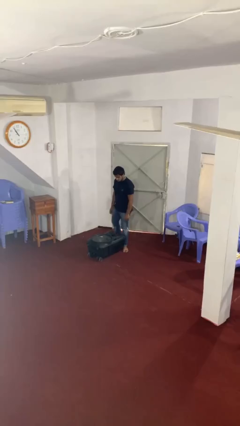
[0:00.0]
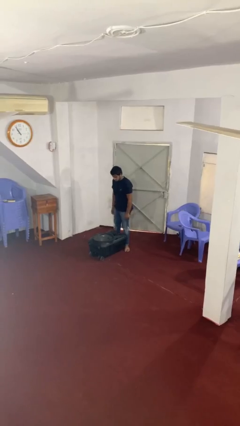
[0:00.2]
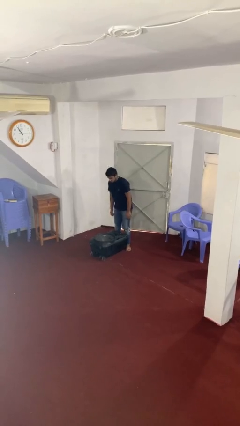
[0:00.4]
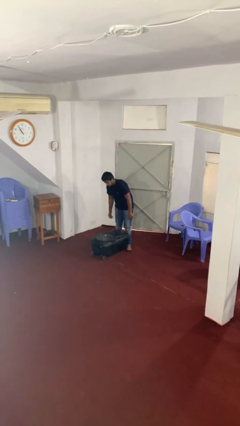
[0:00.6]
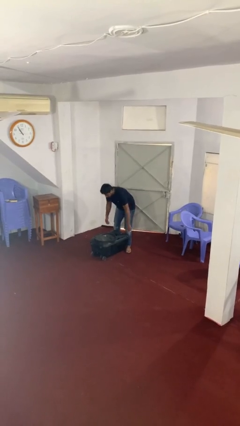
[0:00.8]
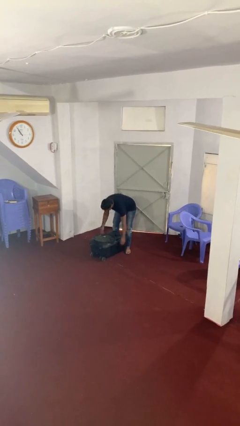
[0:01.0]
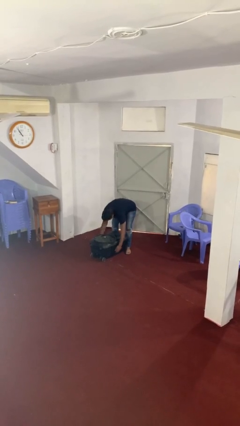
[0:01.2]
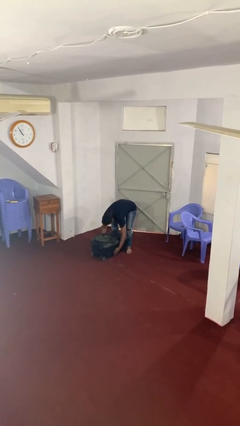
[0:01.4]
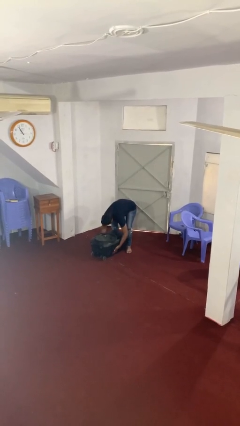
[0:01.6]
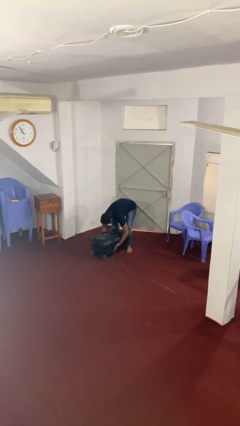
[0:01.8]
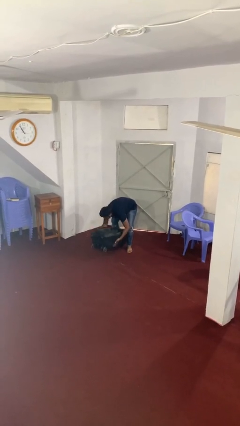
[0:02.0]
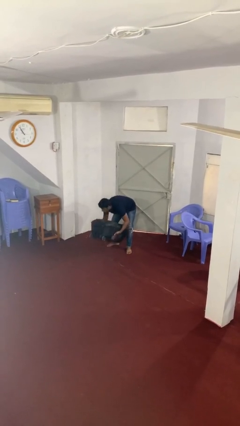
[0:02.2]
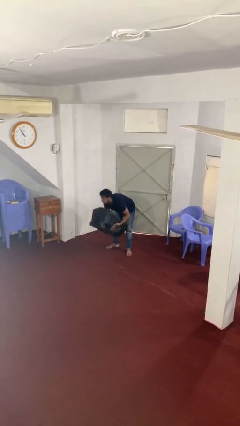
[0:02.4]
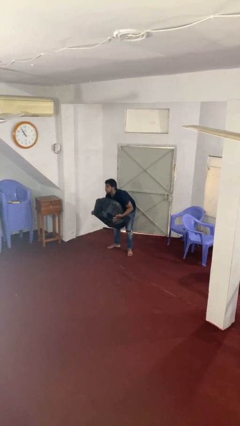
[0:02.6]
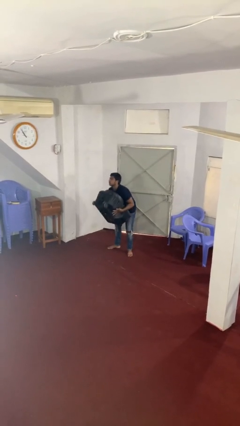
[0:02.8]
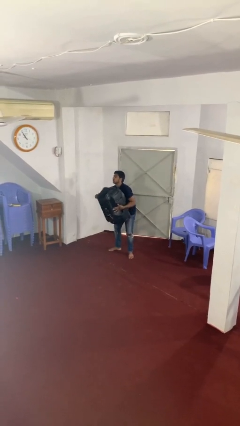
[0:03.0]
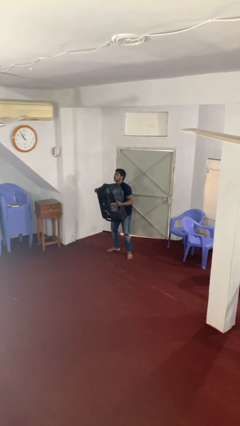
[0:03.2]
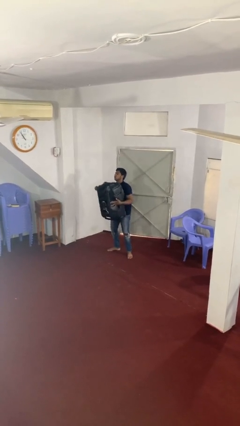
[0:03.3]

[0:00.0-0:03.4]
person picks up object from floor

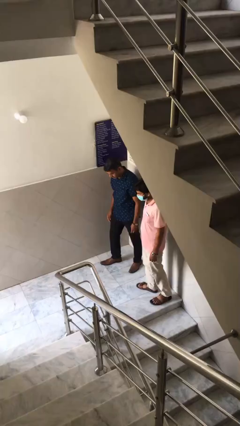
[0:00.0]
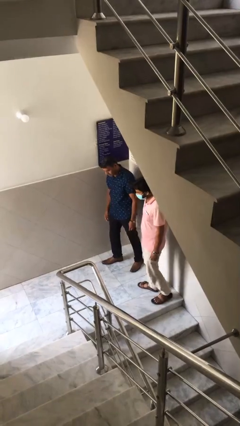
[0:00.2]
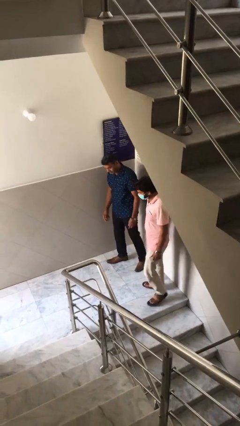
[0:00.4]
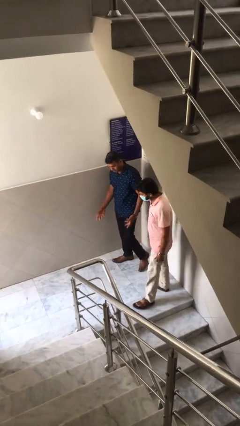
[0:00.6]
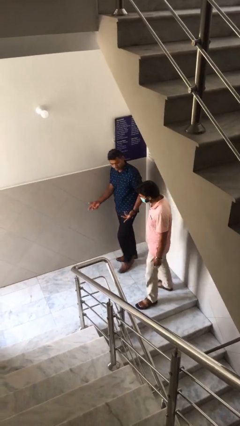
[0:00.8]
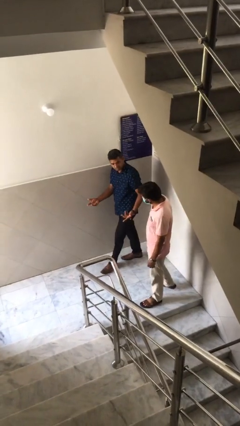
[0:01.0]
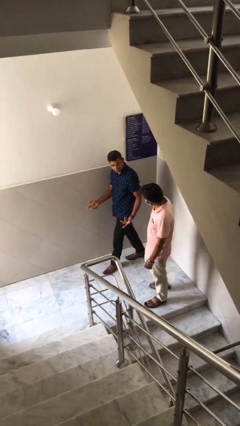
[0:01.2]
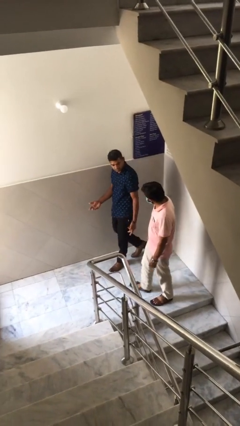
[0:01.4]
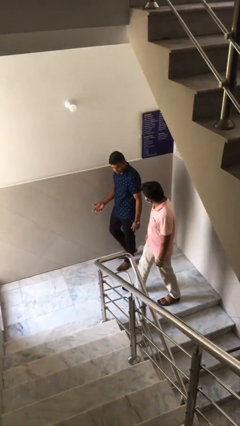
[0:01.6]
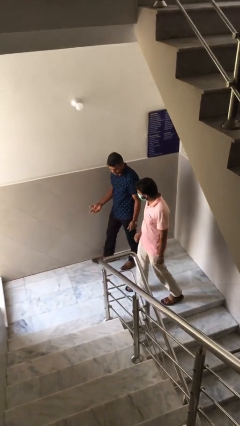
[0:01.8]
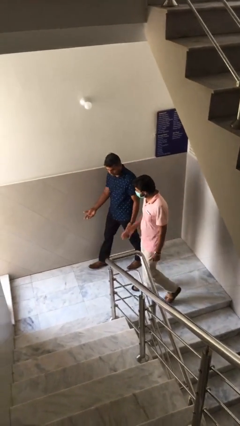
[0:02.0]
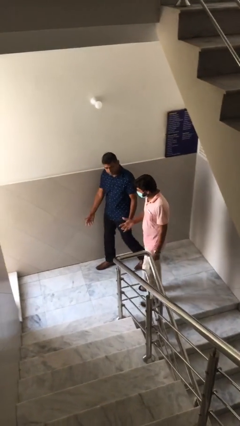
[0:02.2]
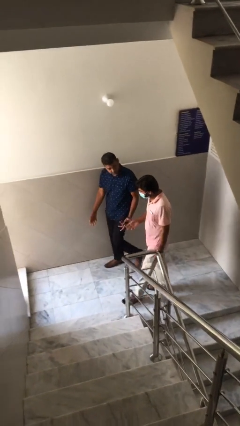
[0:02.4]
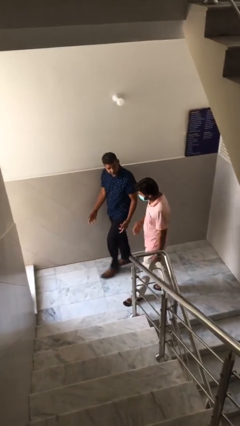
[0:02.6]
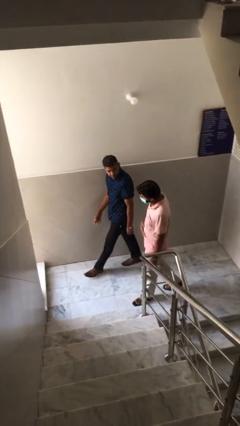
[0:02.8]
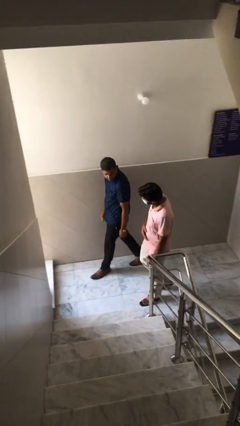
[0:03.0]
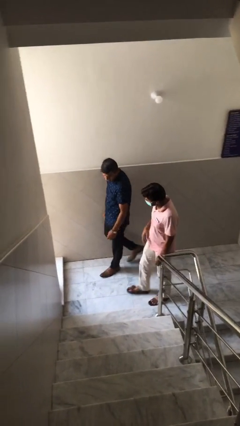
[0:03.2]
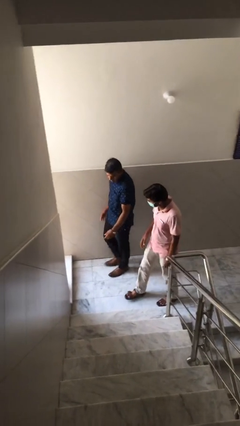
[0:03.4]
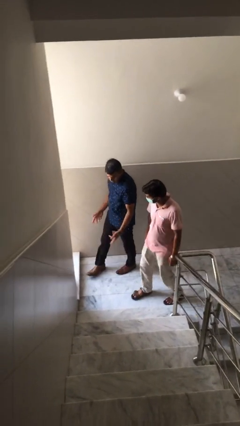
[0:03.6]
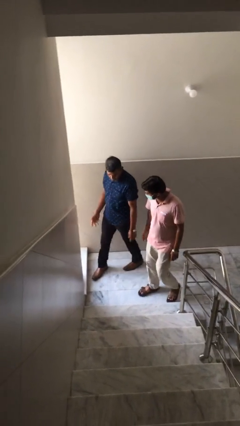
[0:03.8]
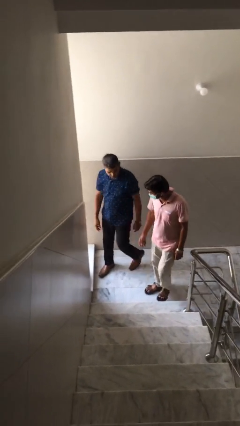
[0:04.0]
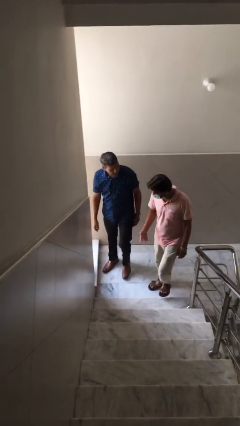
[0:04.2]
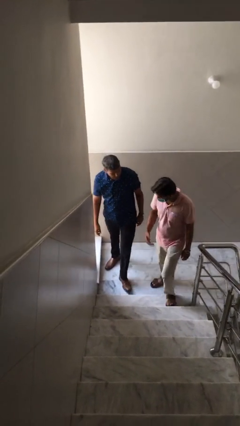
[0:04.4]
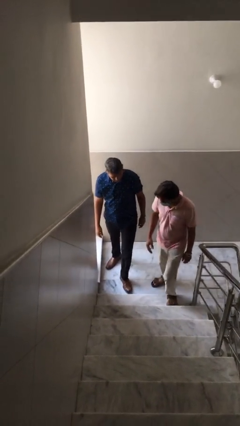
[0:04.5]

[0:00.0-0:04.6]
person talks to person

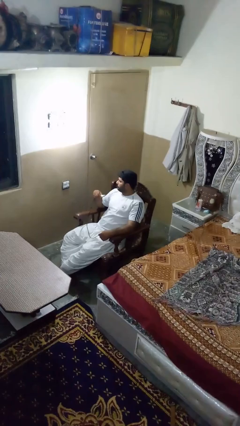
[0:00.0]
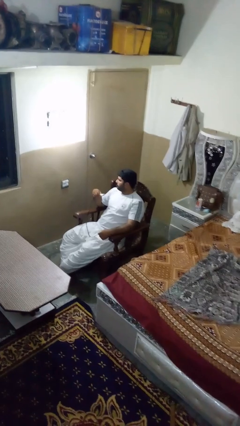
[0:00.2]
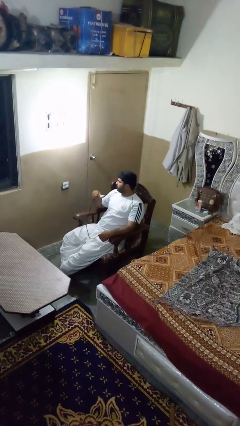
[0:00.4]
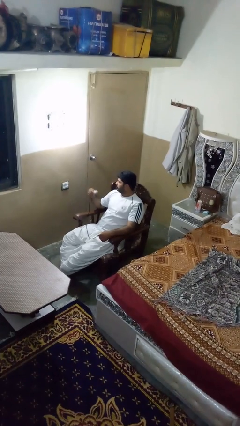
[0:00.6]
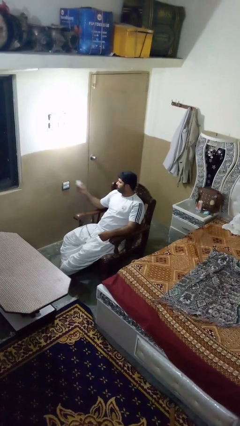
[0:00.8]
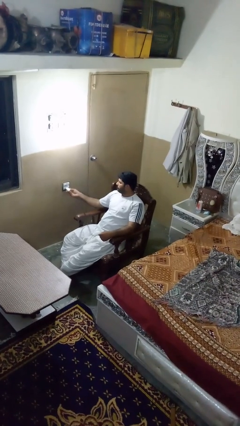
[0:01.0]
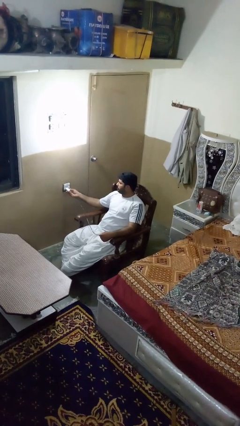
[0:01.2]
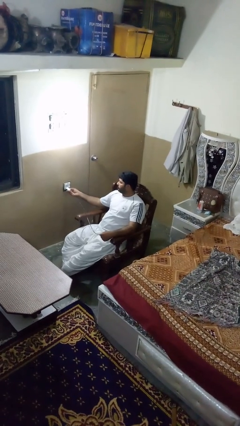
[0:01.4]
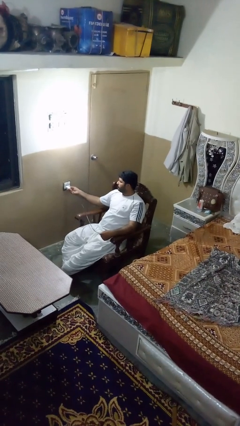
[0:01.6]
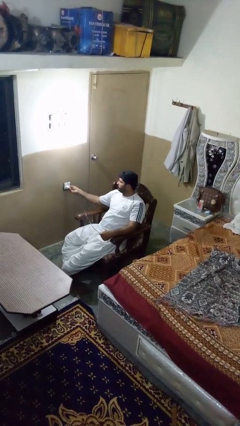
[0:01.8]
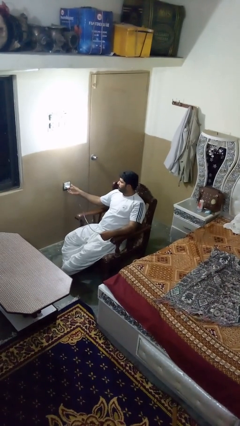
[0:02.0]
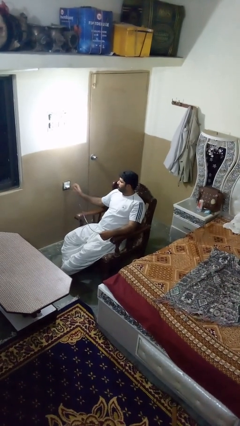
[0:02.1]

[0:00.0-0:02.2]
person plugs into electrical socket

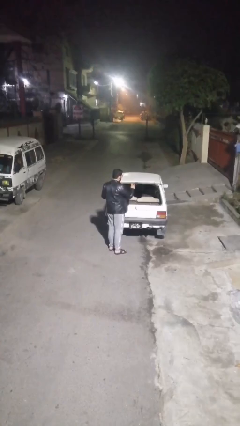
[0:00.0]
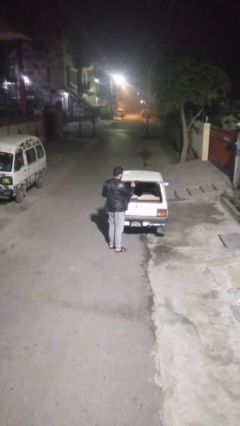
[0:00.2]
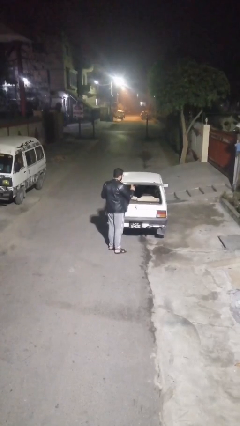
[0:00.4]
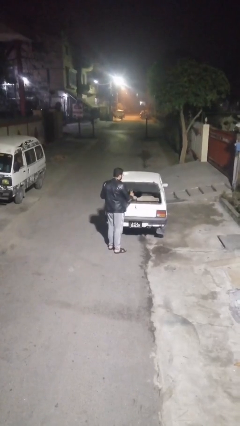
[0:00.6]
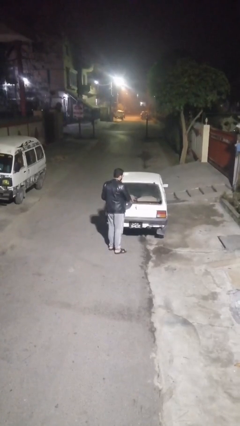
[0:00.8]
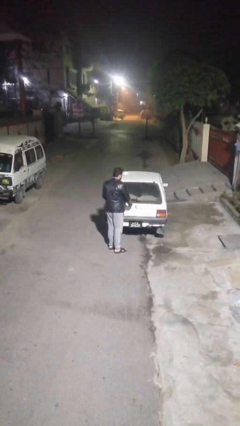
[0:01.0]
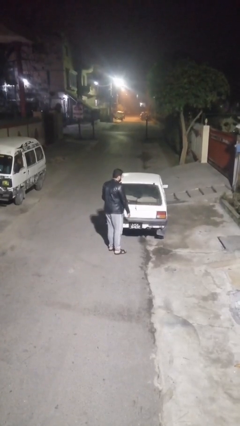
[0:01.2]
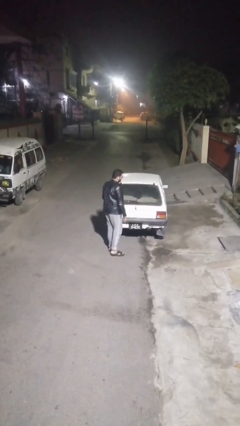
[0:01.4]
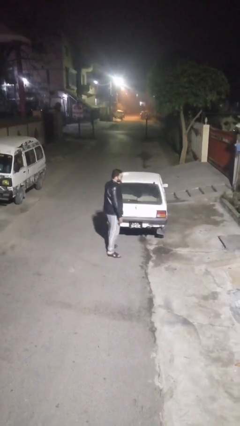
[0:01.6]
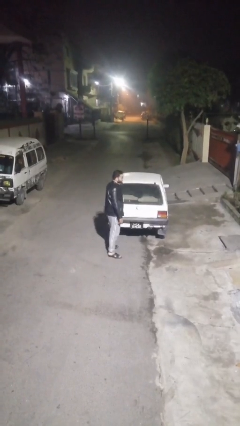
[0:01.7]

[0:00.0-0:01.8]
person closes car trunk

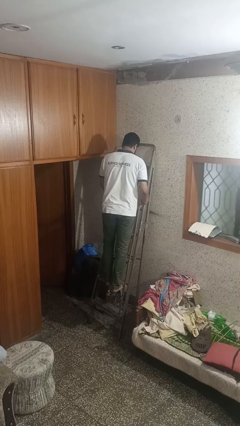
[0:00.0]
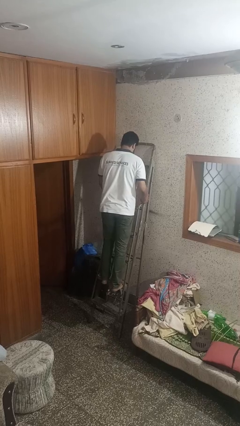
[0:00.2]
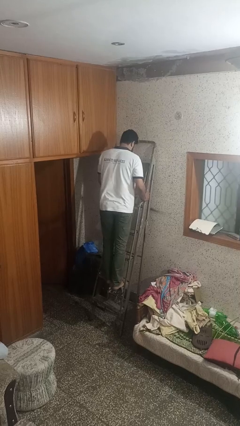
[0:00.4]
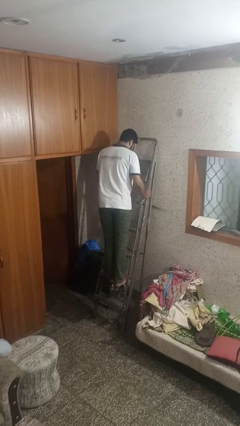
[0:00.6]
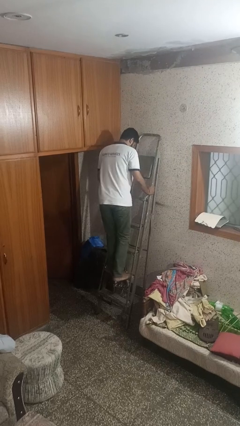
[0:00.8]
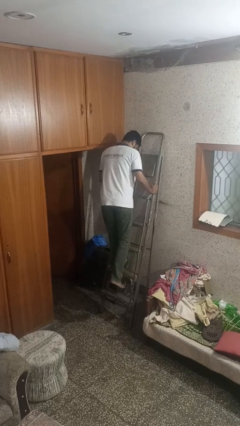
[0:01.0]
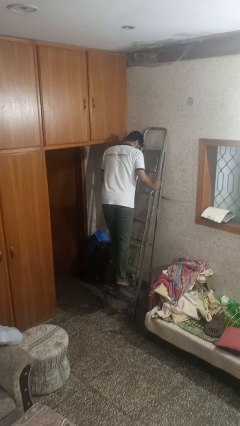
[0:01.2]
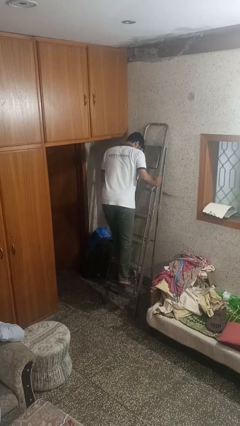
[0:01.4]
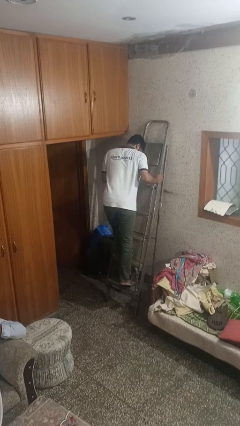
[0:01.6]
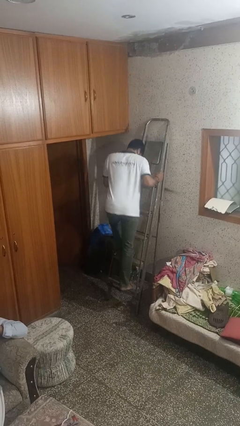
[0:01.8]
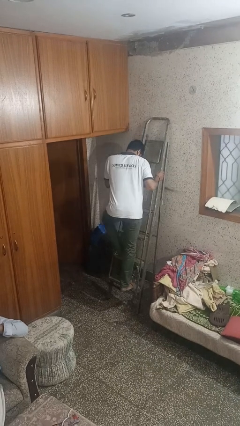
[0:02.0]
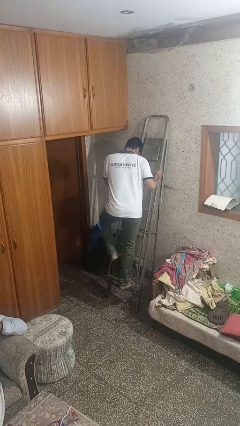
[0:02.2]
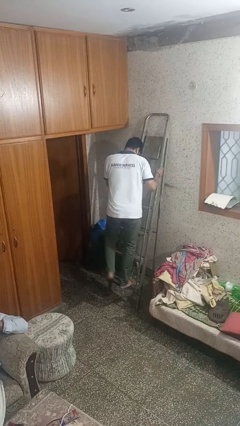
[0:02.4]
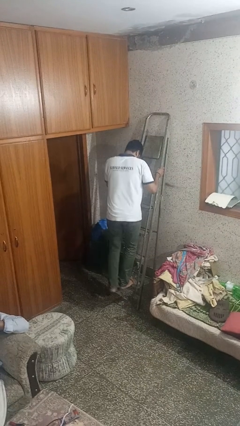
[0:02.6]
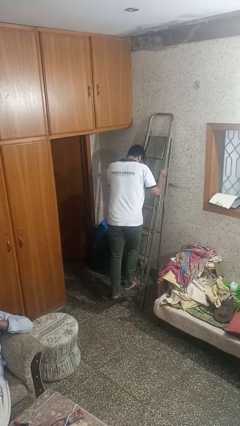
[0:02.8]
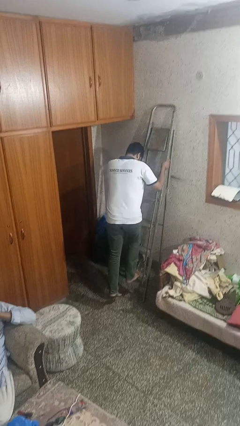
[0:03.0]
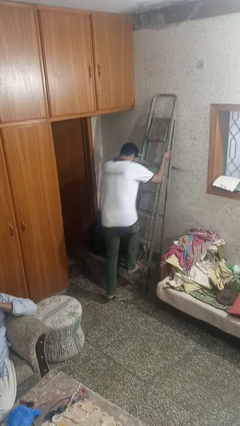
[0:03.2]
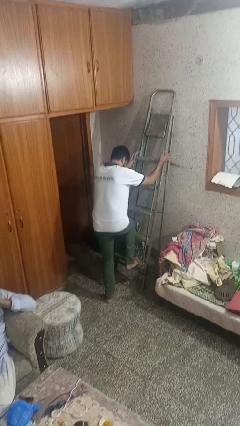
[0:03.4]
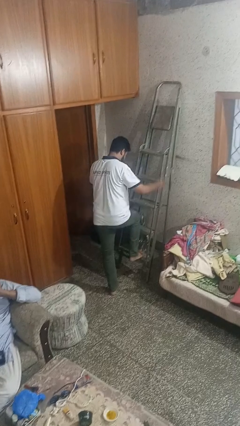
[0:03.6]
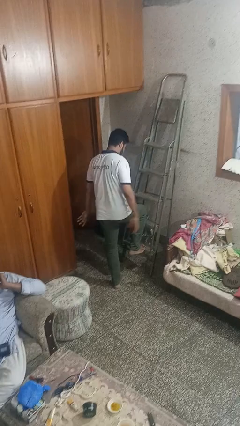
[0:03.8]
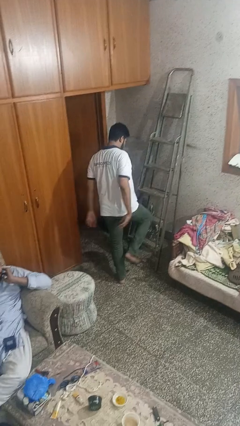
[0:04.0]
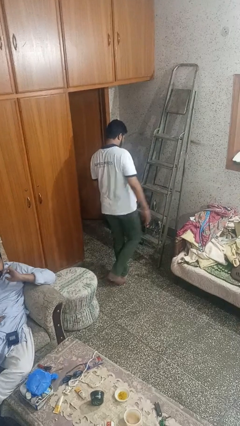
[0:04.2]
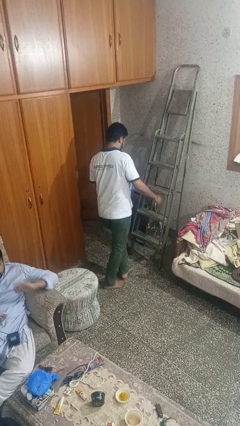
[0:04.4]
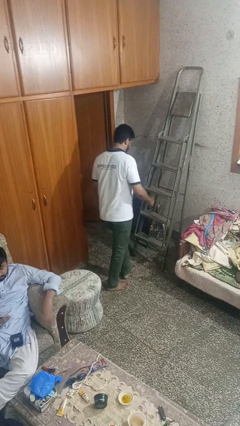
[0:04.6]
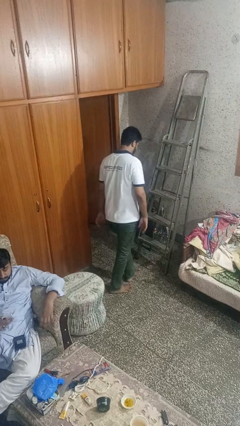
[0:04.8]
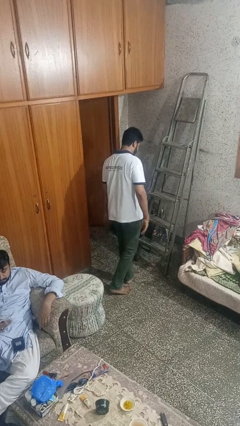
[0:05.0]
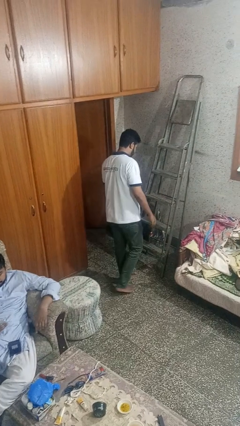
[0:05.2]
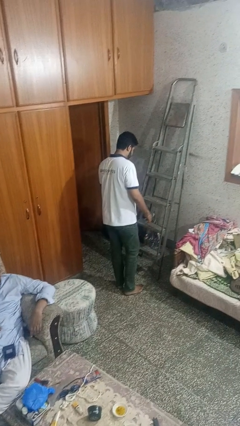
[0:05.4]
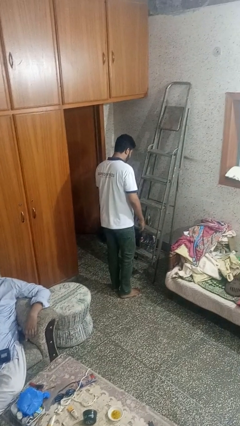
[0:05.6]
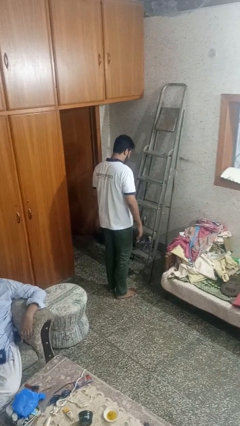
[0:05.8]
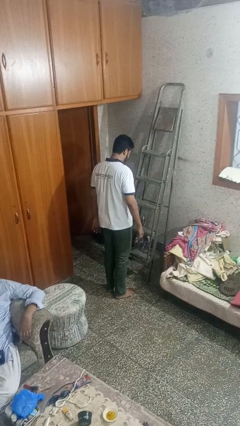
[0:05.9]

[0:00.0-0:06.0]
person climbs down ladder
